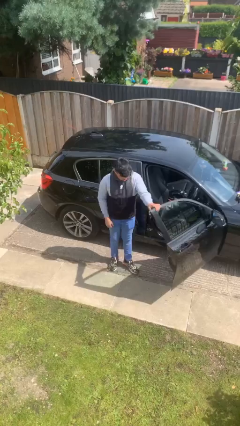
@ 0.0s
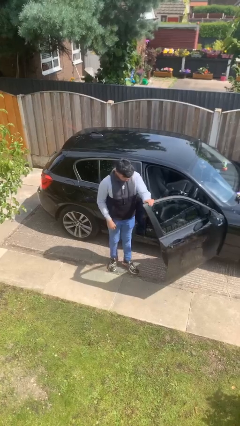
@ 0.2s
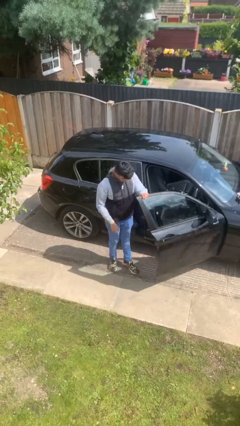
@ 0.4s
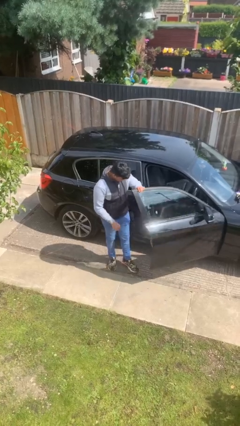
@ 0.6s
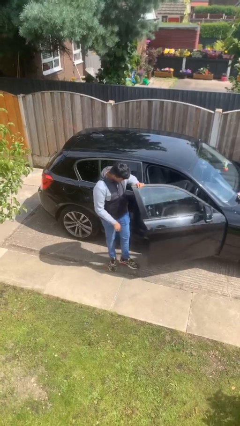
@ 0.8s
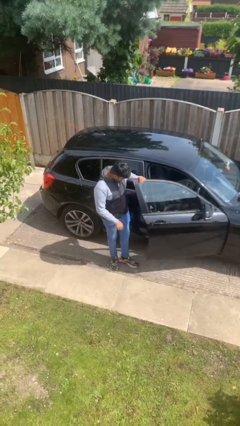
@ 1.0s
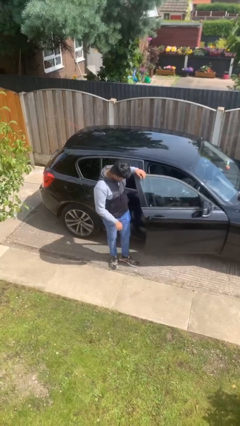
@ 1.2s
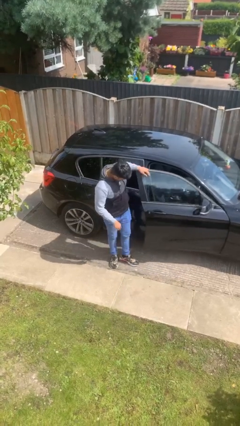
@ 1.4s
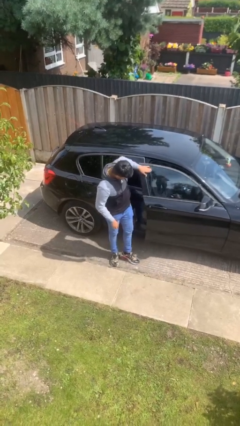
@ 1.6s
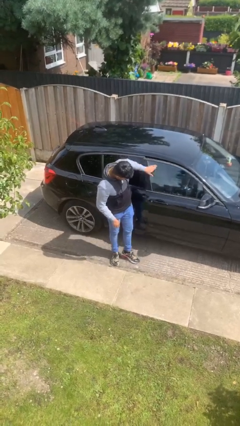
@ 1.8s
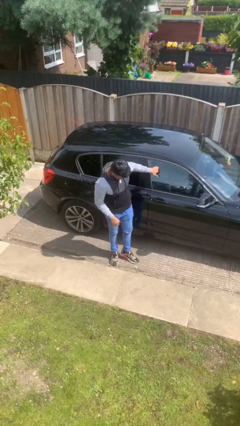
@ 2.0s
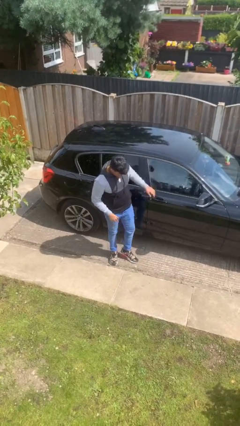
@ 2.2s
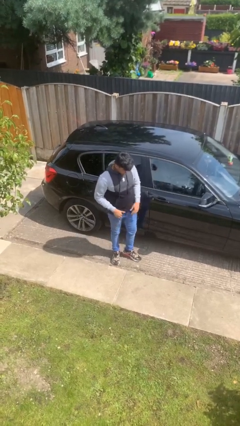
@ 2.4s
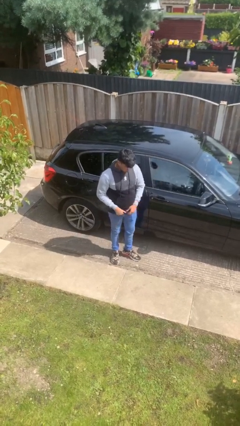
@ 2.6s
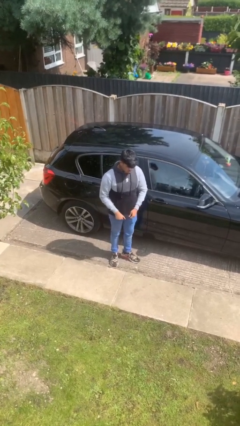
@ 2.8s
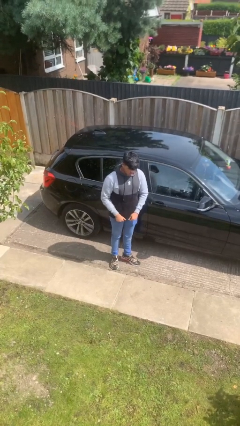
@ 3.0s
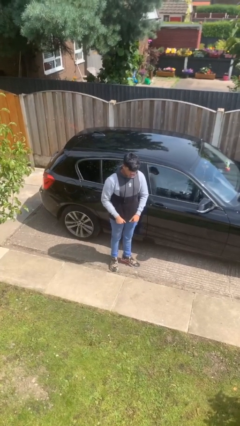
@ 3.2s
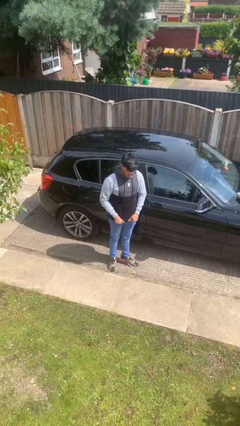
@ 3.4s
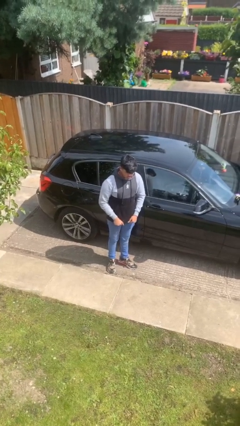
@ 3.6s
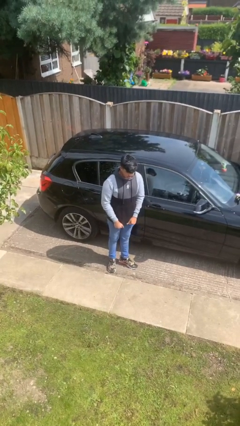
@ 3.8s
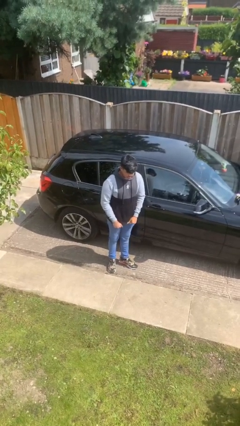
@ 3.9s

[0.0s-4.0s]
person closes car door

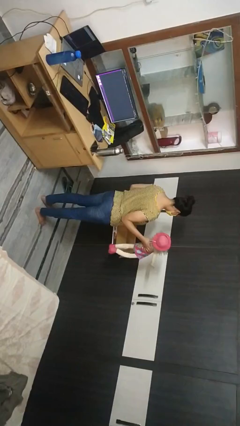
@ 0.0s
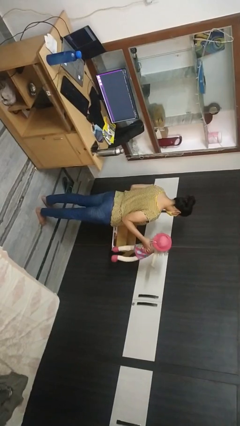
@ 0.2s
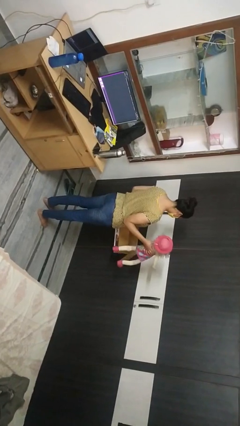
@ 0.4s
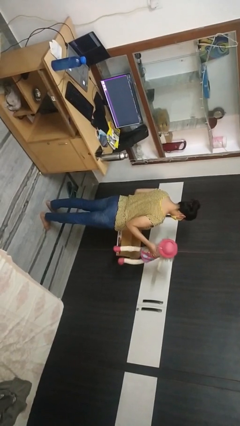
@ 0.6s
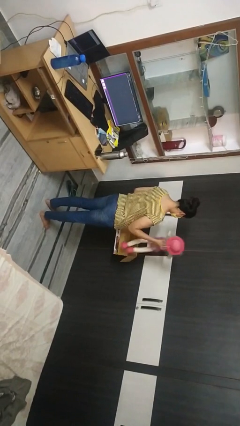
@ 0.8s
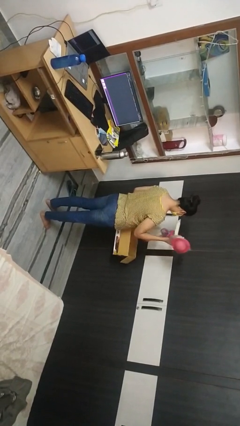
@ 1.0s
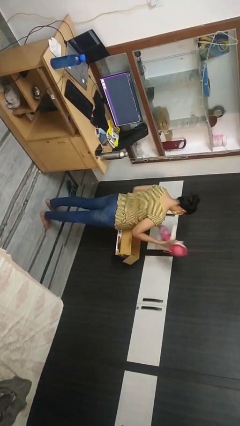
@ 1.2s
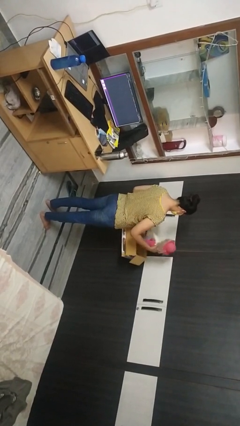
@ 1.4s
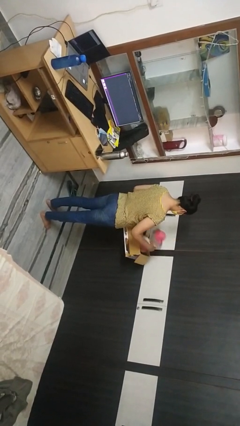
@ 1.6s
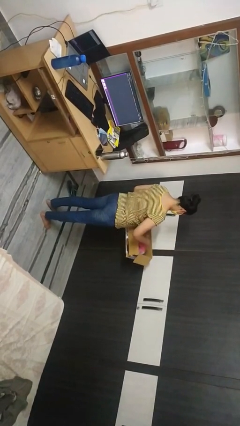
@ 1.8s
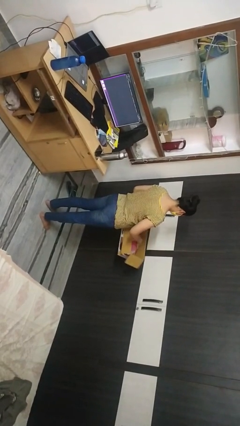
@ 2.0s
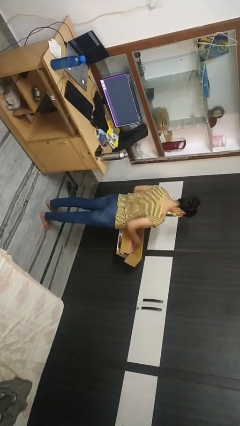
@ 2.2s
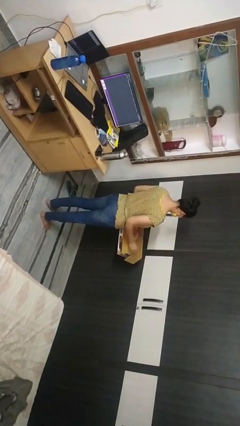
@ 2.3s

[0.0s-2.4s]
person puts object into box

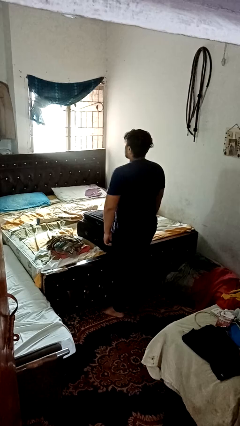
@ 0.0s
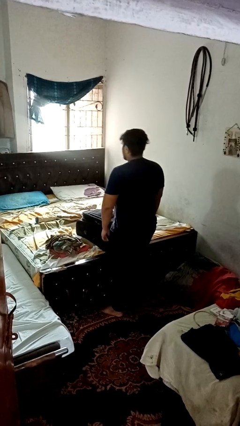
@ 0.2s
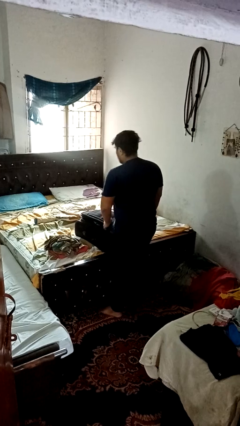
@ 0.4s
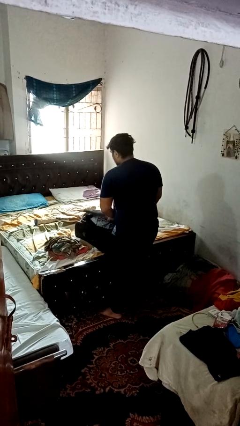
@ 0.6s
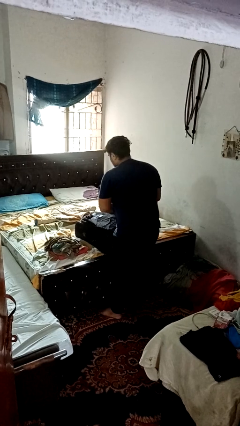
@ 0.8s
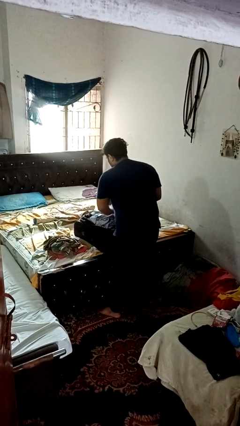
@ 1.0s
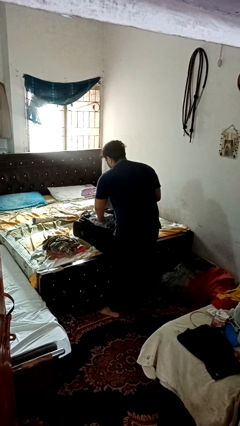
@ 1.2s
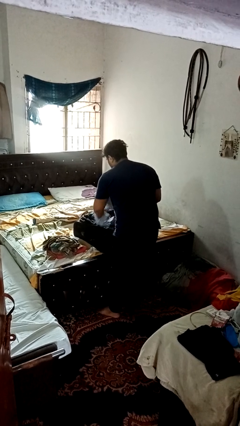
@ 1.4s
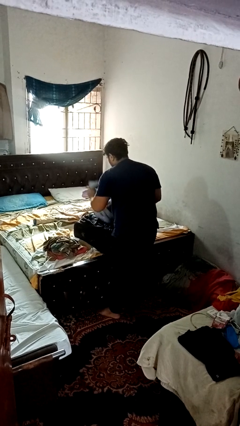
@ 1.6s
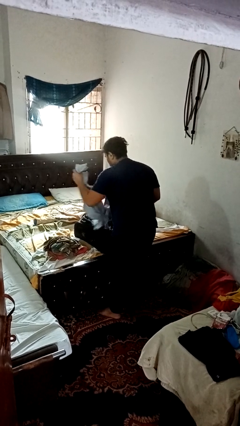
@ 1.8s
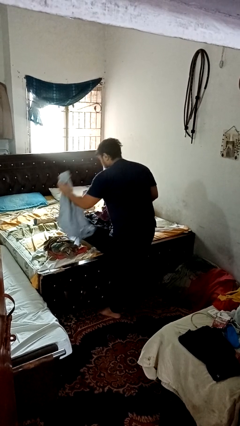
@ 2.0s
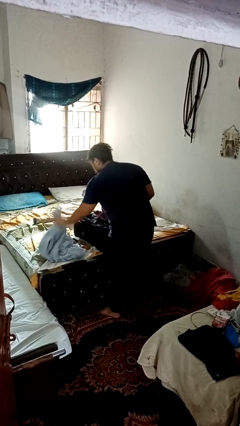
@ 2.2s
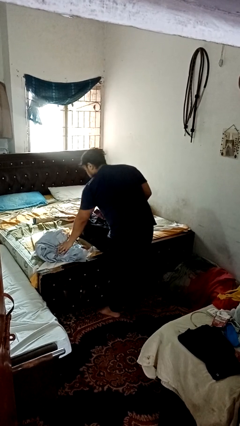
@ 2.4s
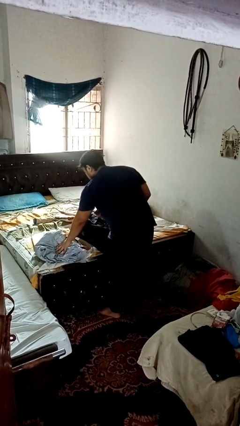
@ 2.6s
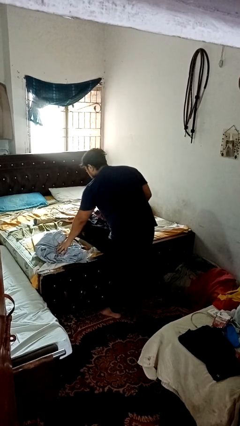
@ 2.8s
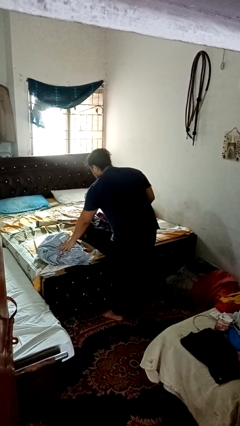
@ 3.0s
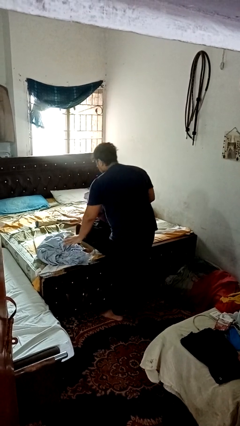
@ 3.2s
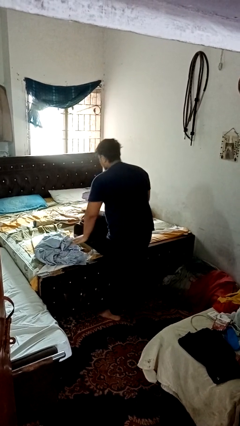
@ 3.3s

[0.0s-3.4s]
person unloads clothes from suitcase

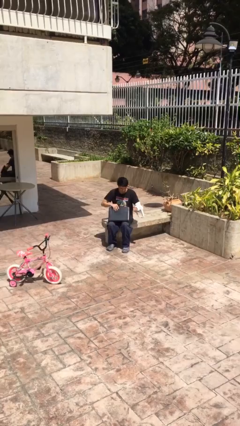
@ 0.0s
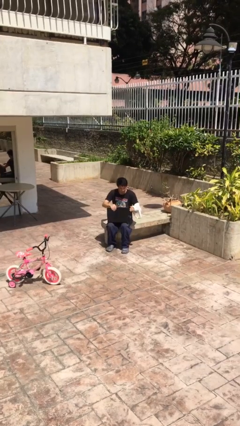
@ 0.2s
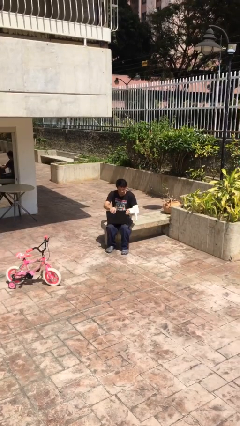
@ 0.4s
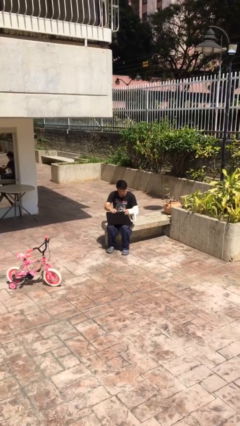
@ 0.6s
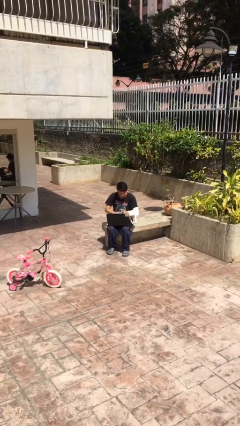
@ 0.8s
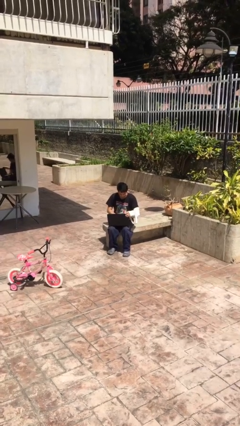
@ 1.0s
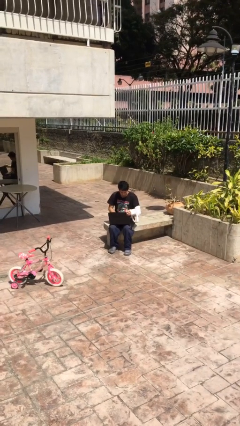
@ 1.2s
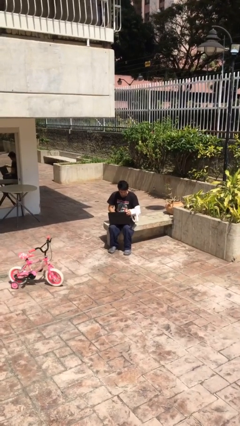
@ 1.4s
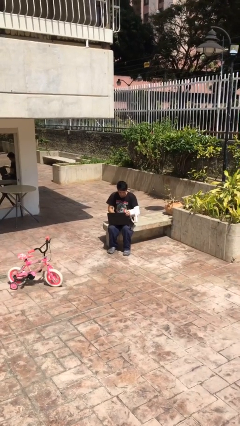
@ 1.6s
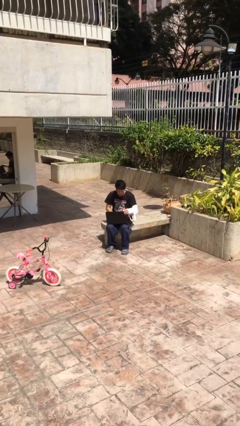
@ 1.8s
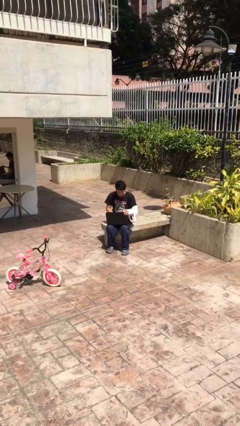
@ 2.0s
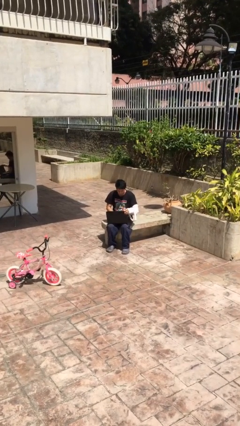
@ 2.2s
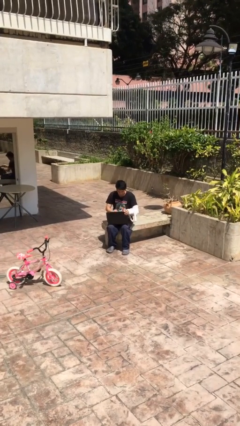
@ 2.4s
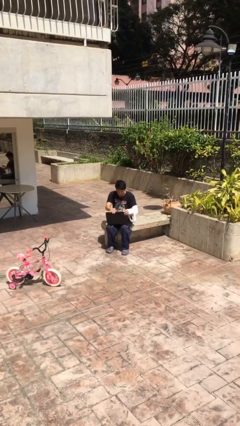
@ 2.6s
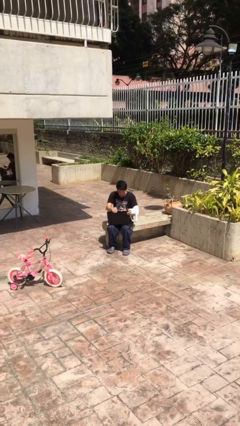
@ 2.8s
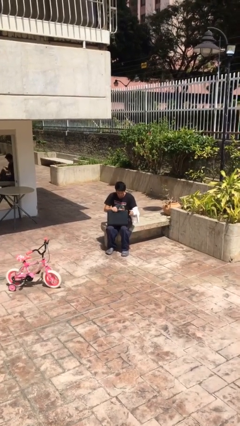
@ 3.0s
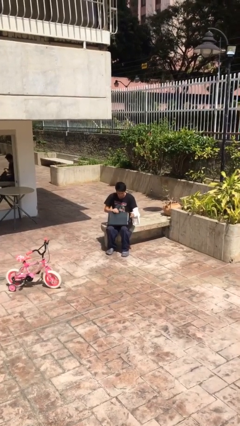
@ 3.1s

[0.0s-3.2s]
person interacts with laptop

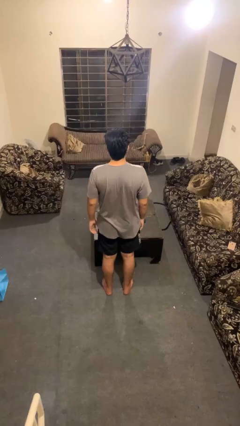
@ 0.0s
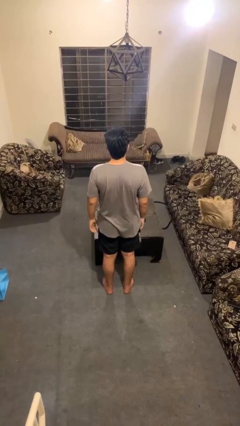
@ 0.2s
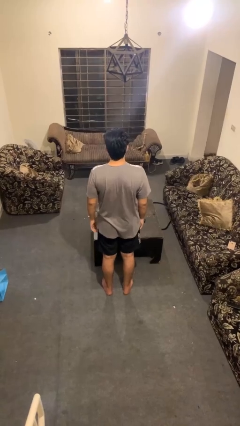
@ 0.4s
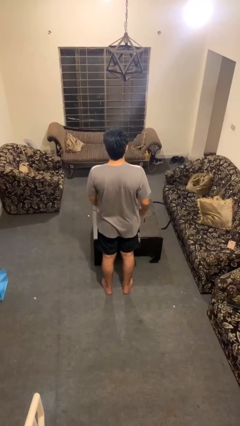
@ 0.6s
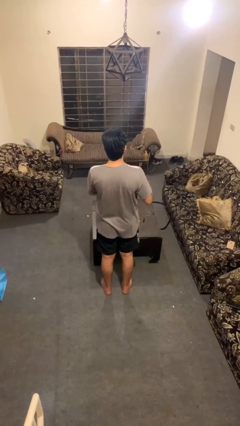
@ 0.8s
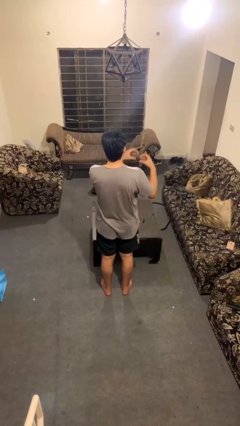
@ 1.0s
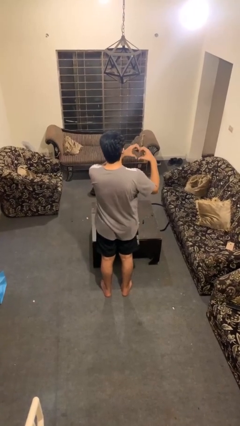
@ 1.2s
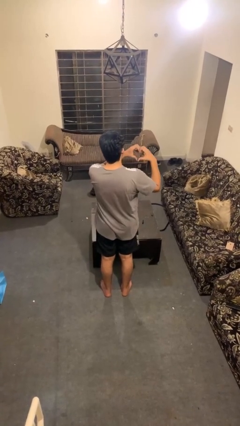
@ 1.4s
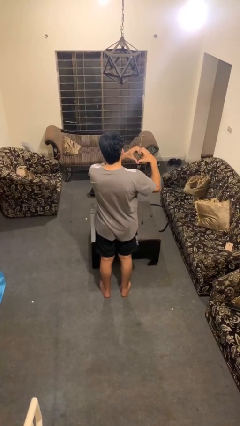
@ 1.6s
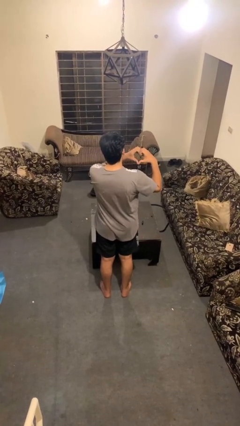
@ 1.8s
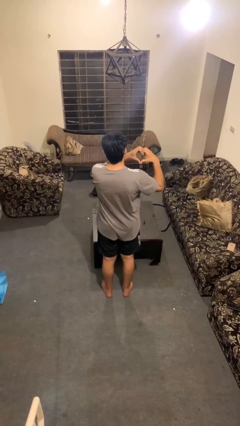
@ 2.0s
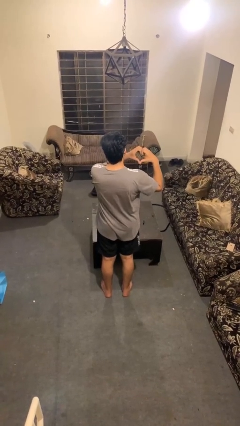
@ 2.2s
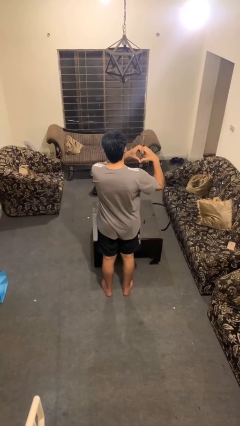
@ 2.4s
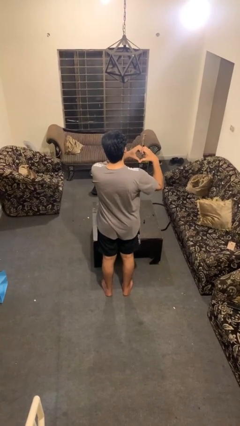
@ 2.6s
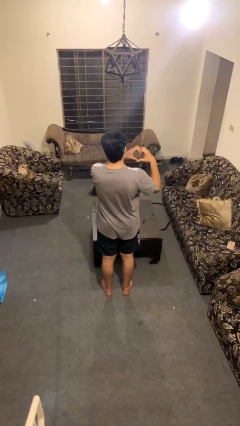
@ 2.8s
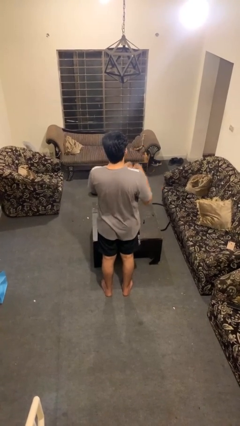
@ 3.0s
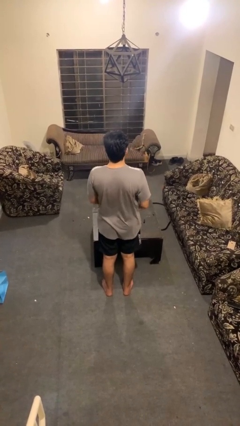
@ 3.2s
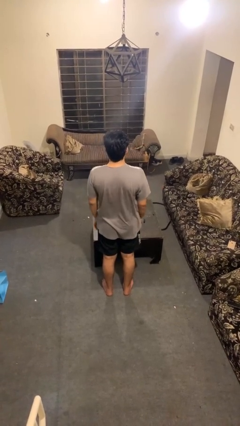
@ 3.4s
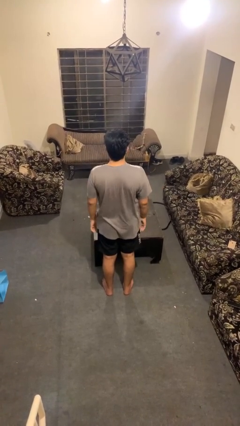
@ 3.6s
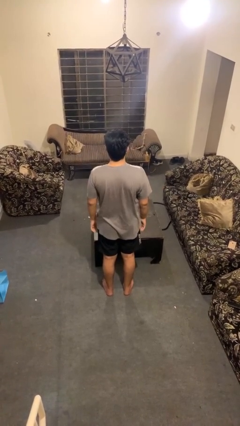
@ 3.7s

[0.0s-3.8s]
person gestures heart

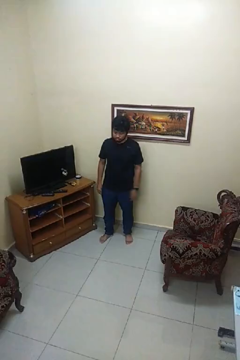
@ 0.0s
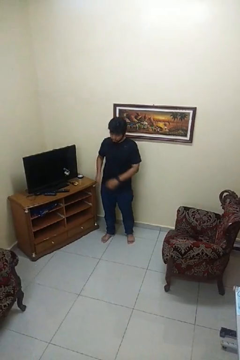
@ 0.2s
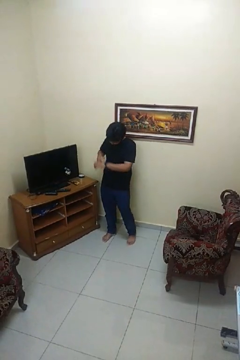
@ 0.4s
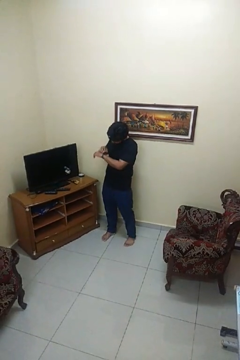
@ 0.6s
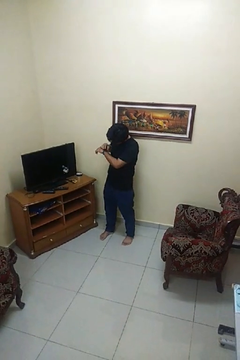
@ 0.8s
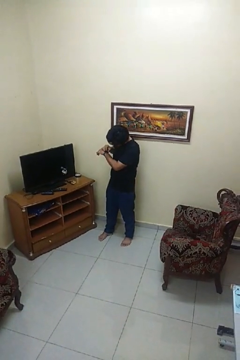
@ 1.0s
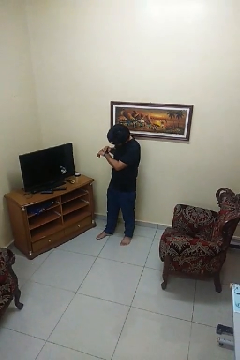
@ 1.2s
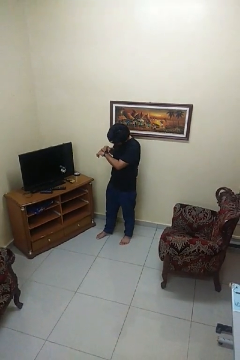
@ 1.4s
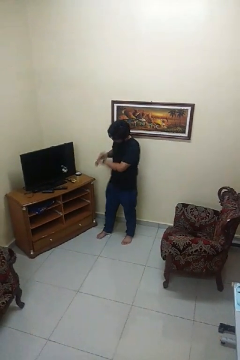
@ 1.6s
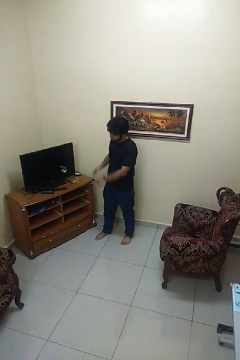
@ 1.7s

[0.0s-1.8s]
person looks at wristwatch
